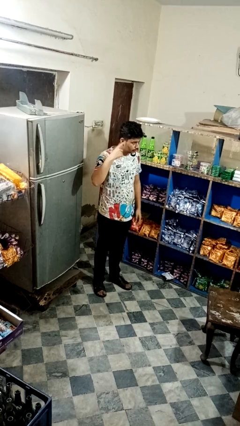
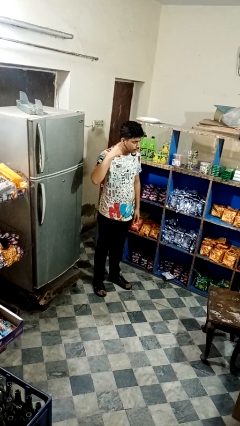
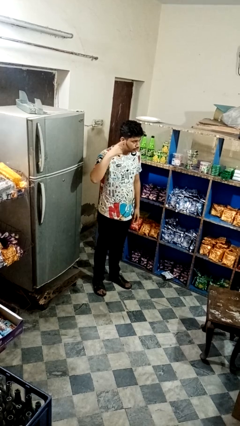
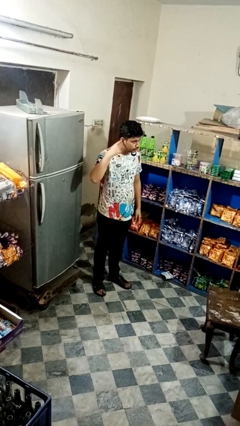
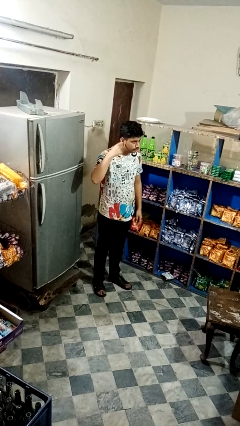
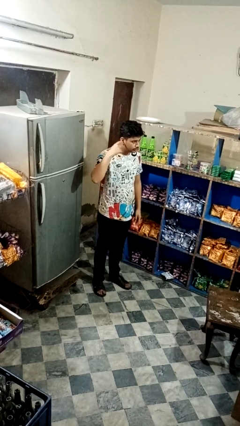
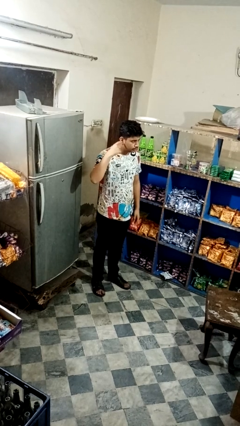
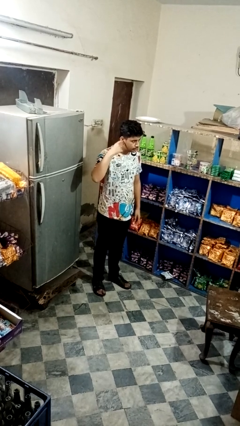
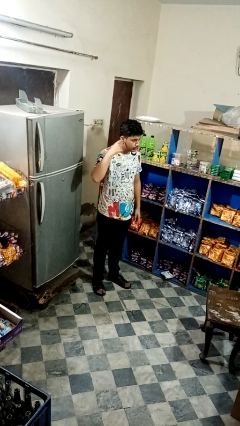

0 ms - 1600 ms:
person gestures listen closely

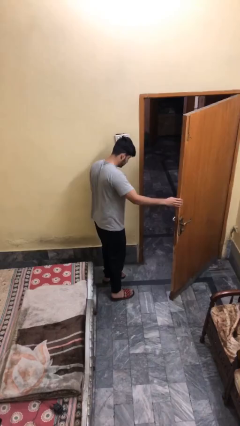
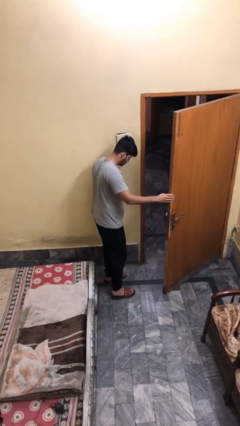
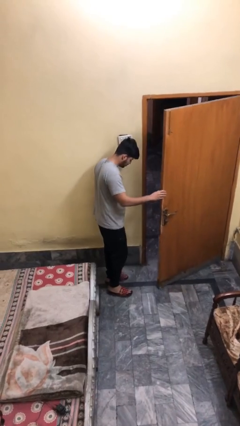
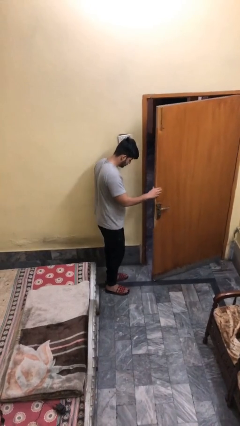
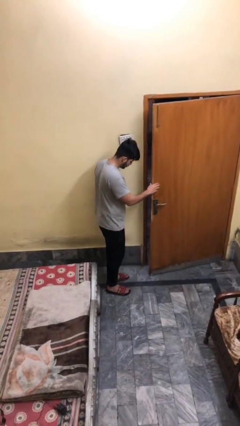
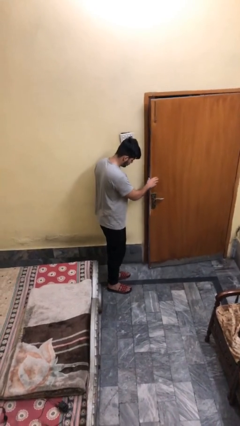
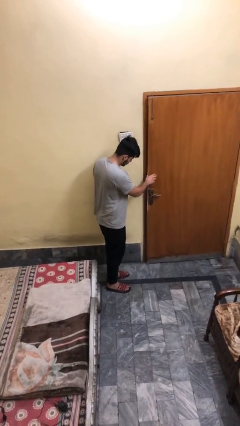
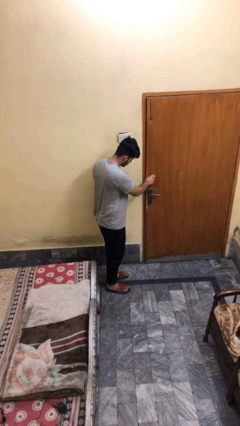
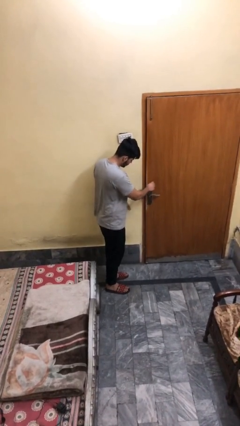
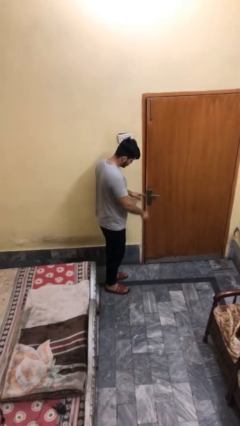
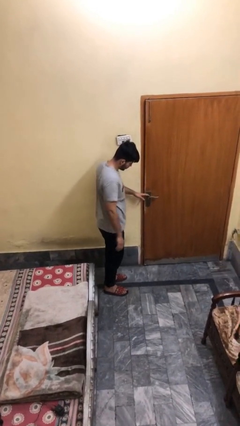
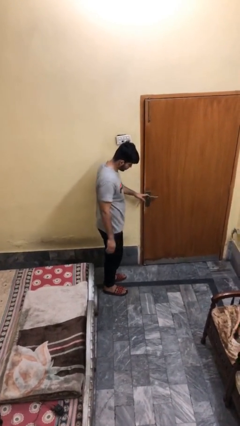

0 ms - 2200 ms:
person closes facility door

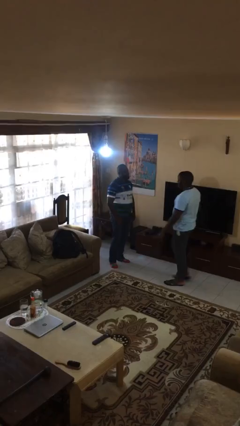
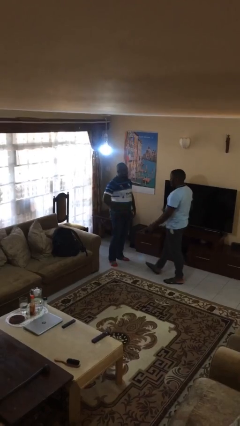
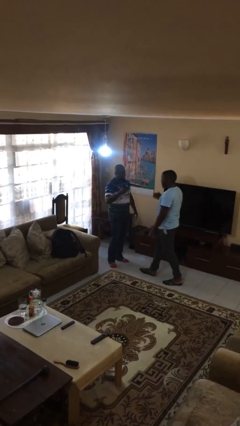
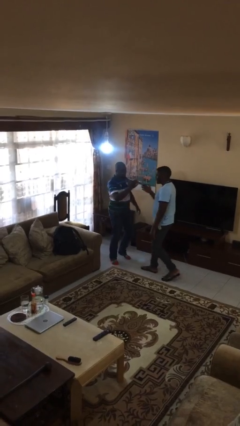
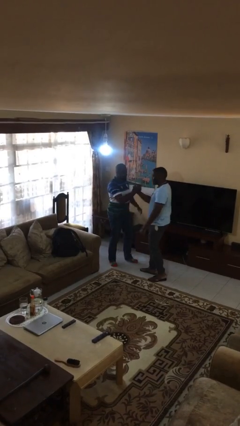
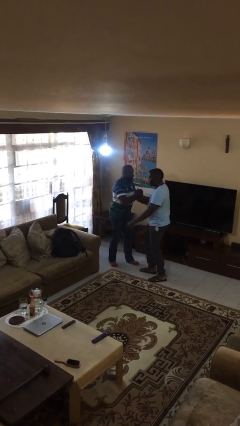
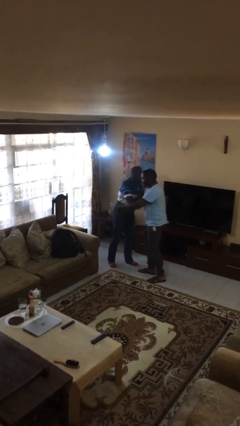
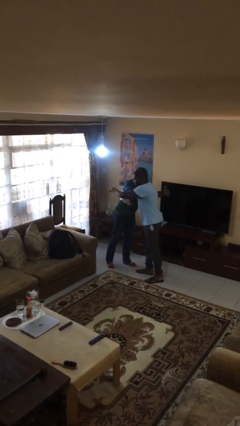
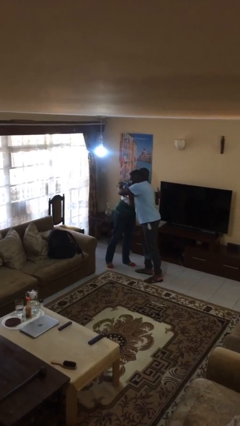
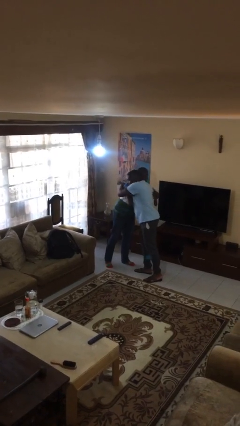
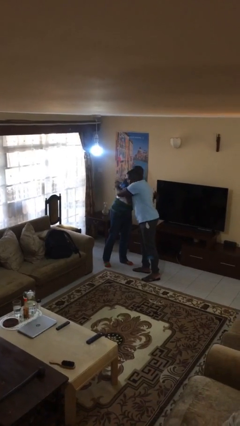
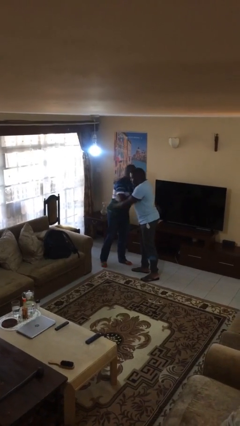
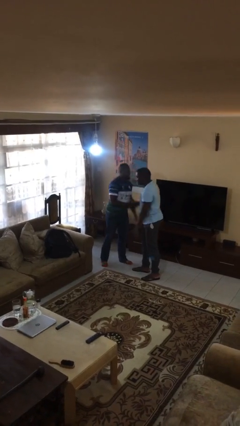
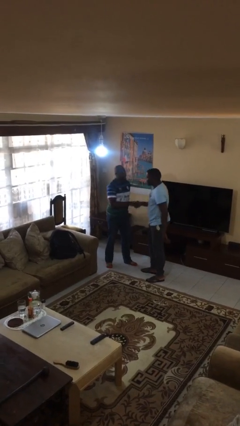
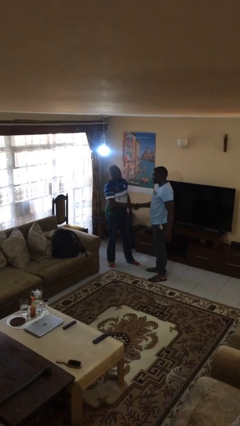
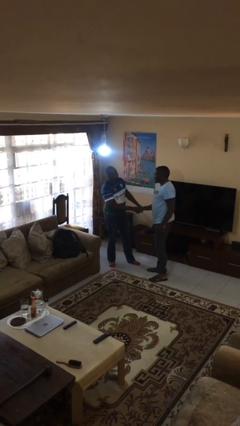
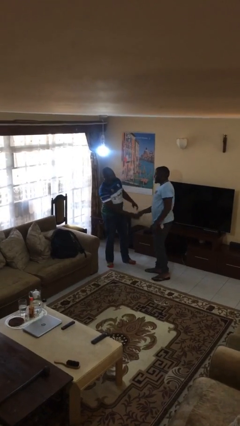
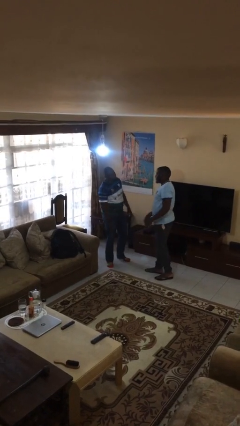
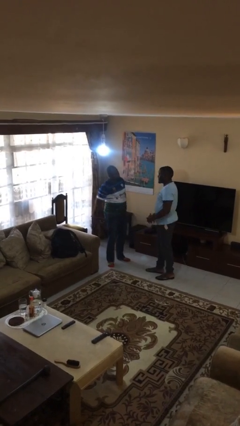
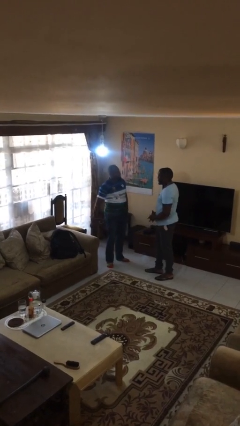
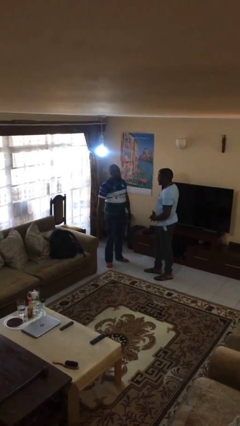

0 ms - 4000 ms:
person embraces person

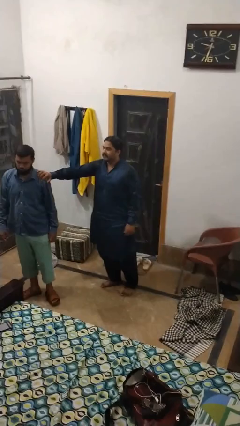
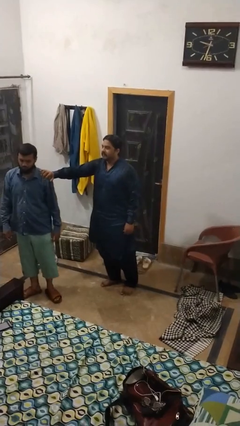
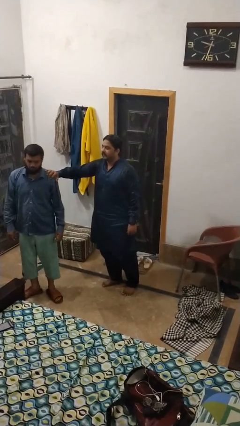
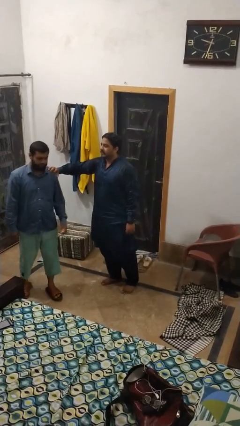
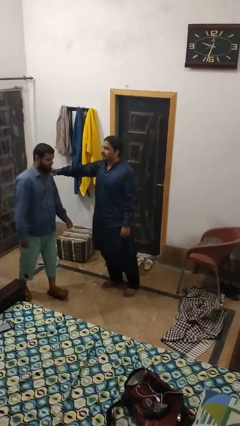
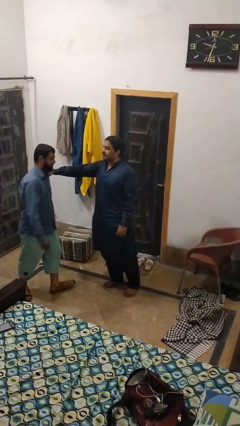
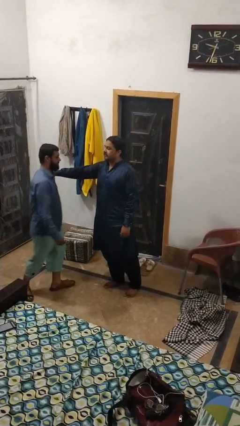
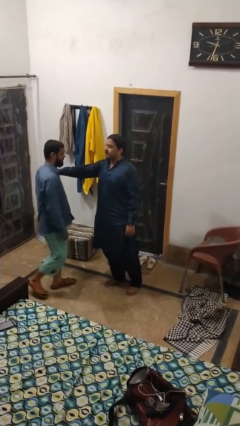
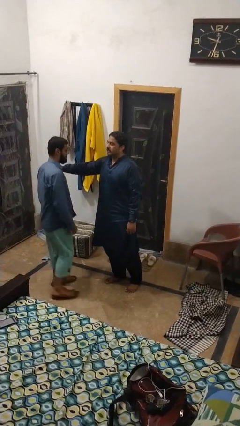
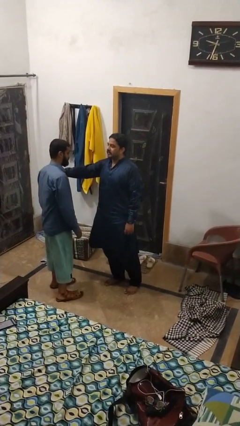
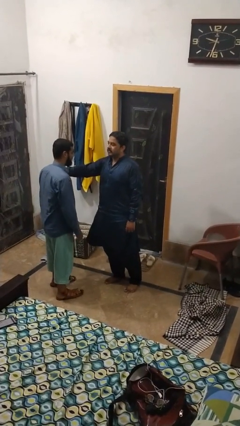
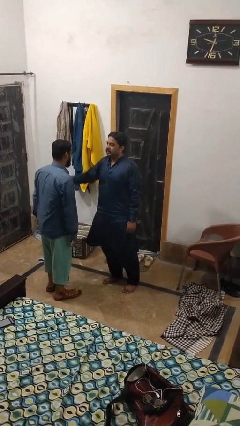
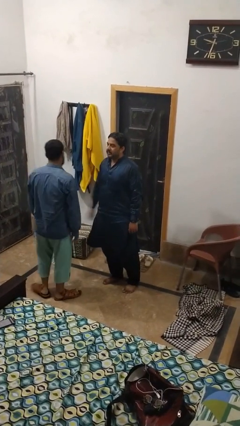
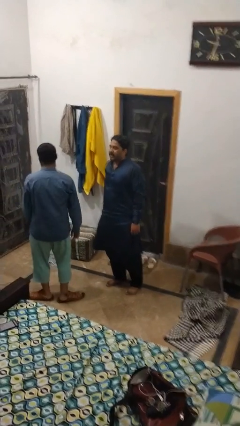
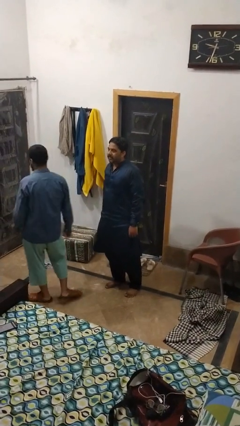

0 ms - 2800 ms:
person spins person around

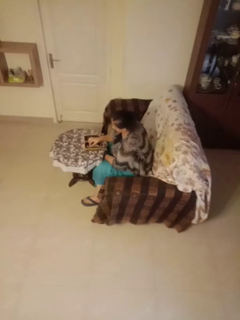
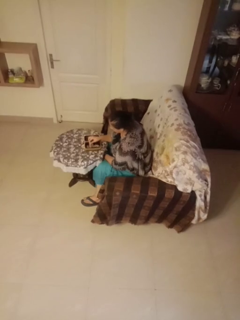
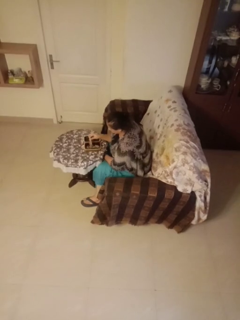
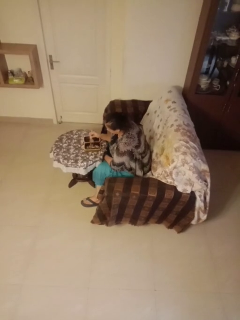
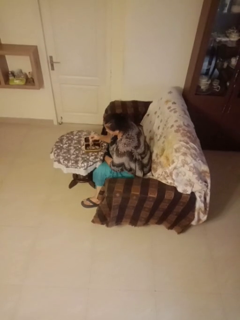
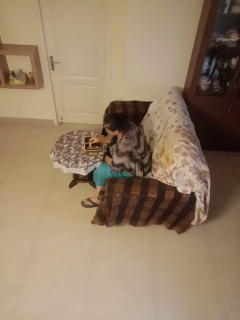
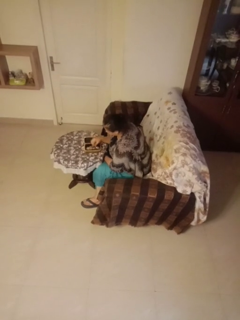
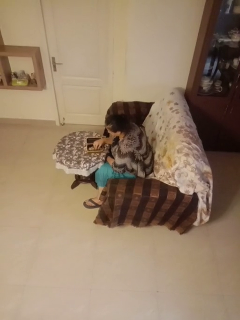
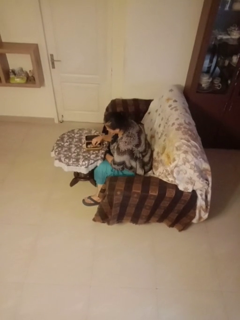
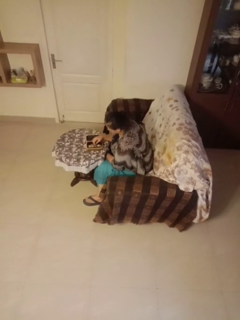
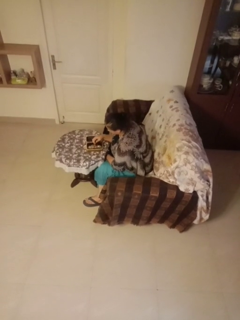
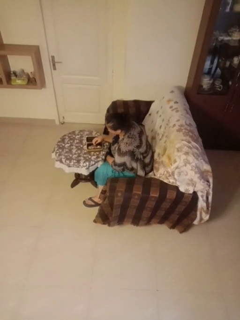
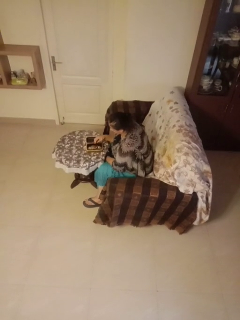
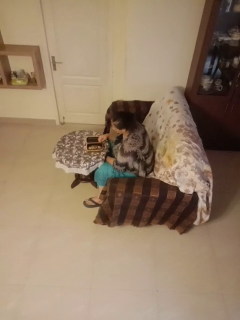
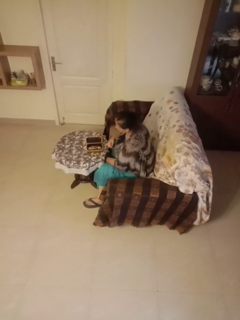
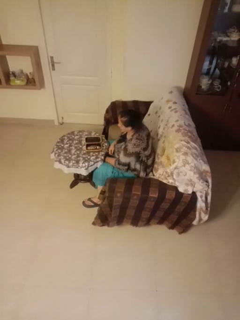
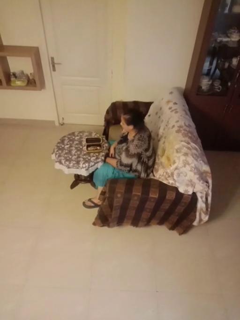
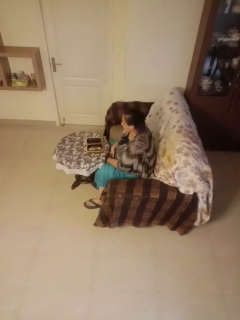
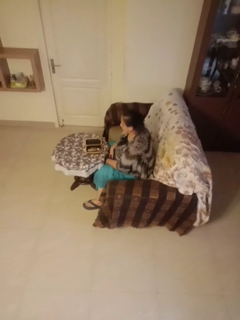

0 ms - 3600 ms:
person searches jewelry box

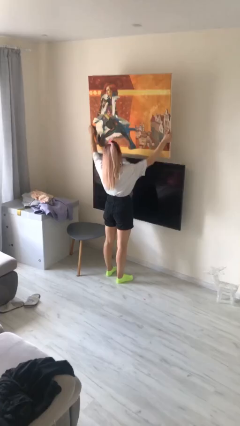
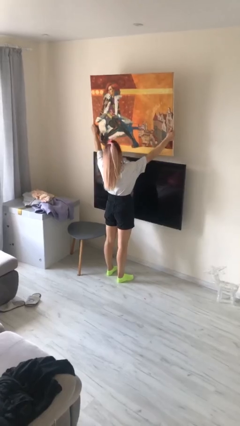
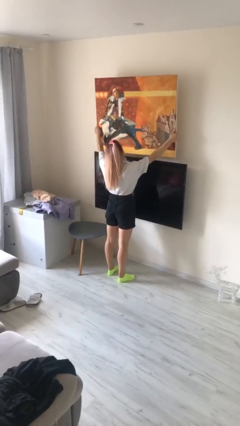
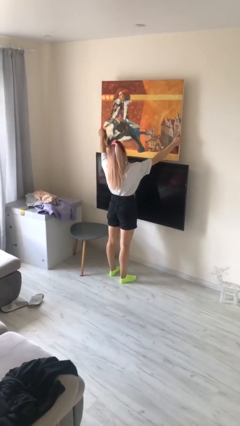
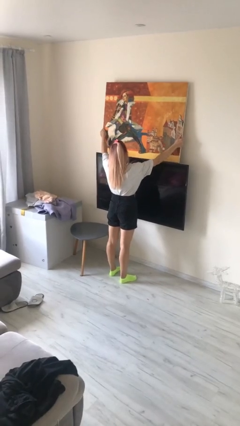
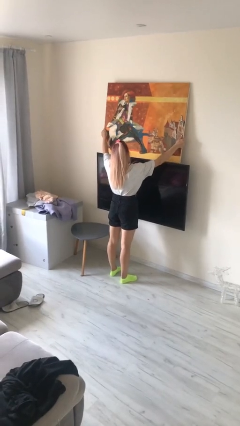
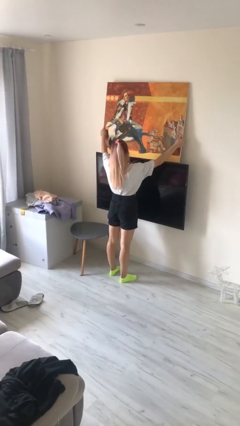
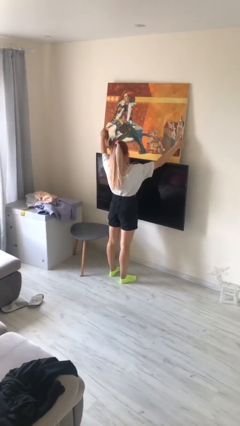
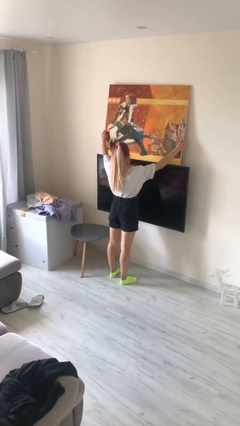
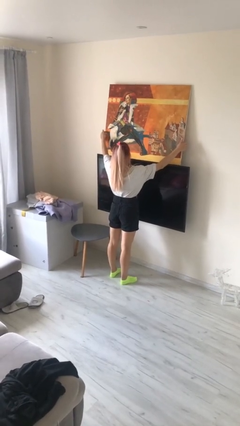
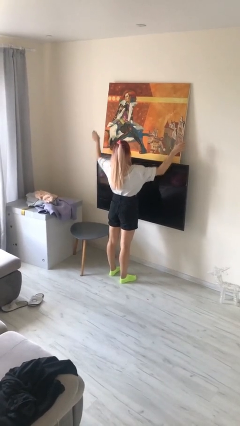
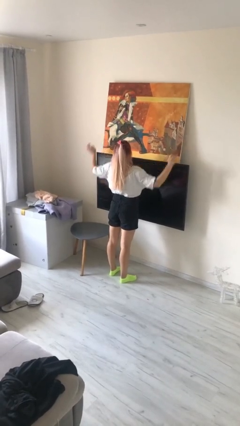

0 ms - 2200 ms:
person puts up picture frame

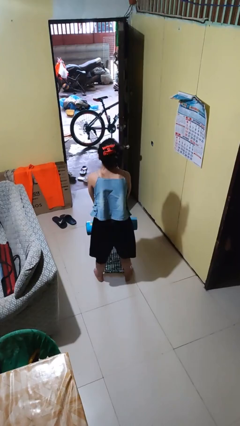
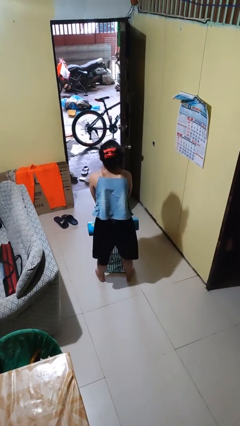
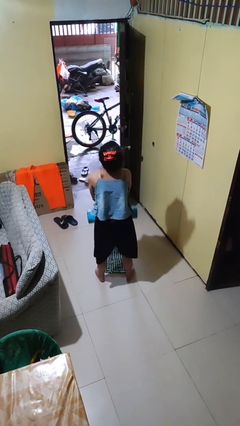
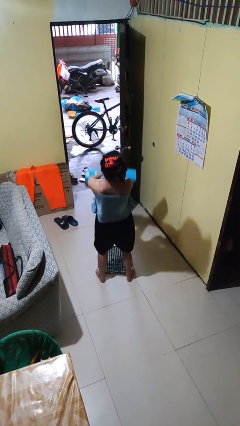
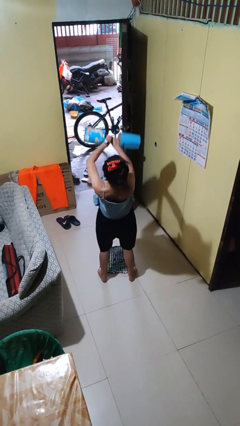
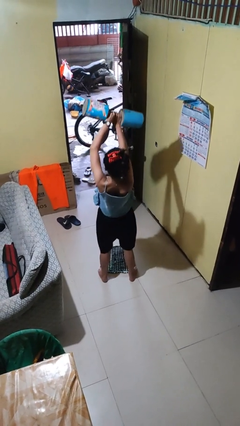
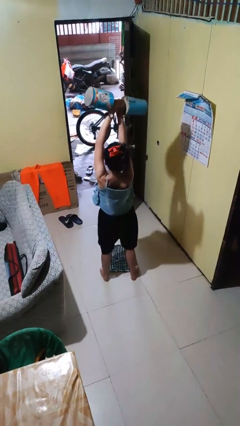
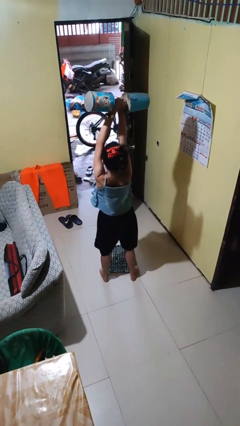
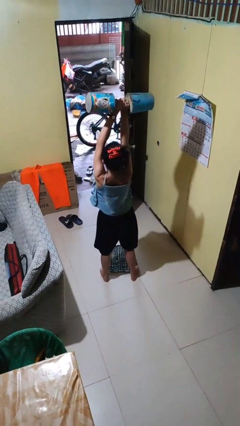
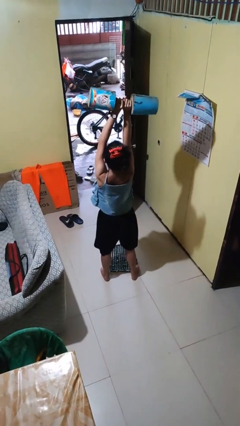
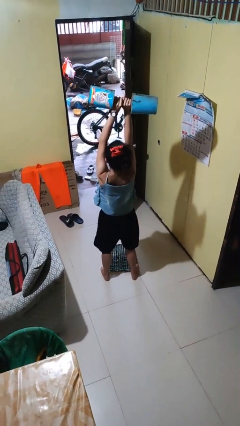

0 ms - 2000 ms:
person lifts dumbbells
